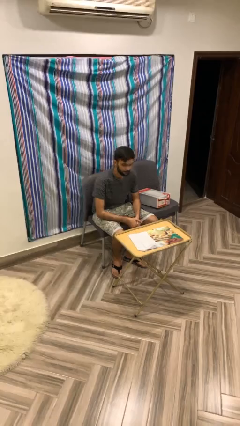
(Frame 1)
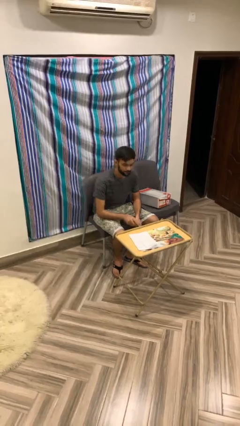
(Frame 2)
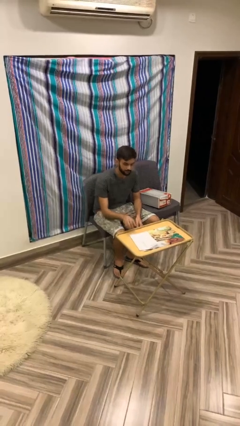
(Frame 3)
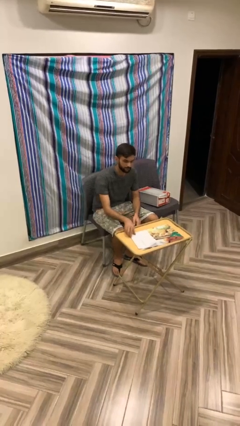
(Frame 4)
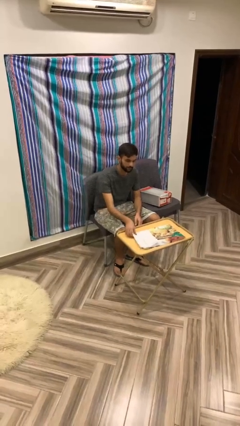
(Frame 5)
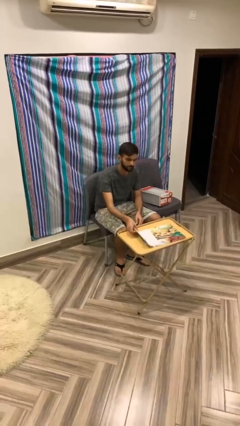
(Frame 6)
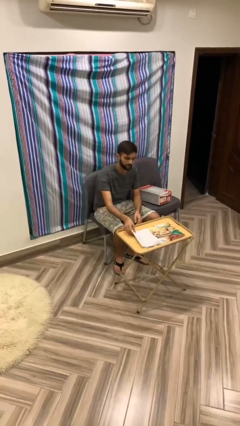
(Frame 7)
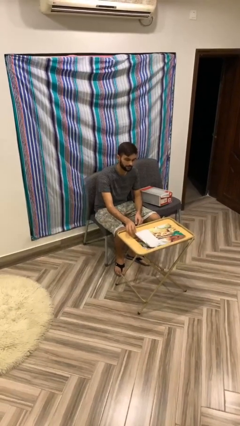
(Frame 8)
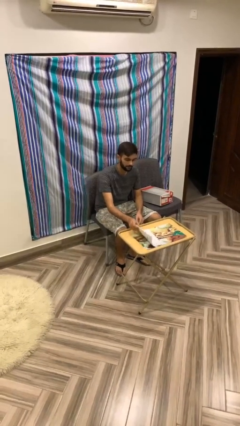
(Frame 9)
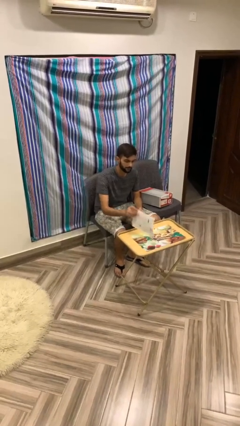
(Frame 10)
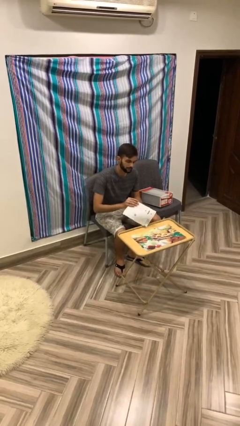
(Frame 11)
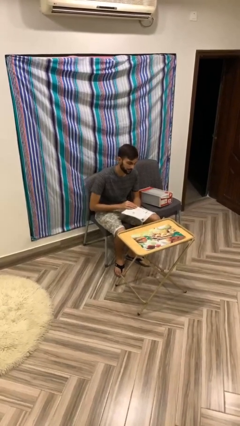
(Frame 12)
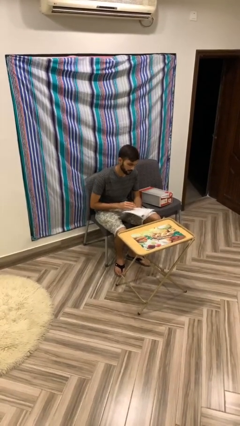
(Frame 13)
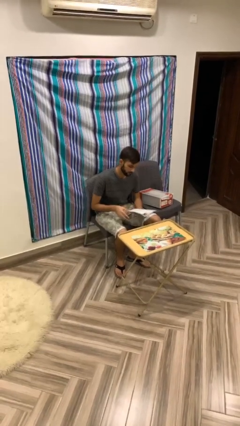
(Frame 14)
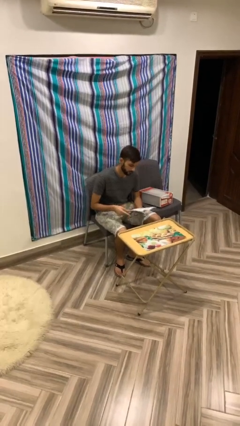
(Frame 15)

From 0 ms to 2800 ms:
person picks up object from table

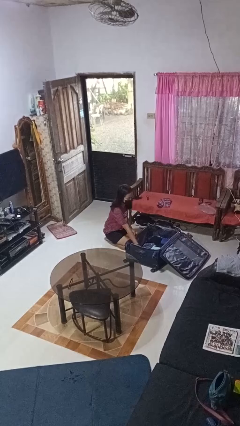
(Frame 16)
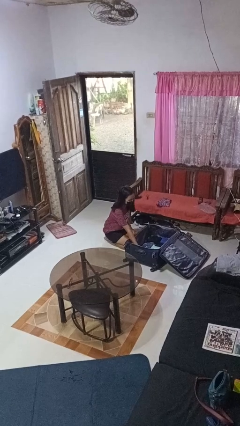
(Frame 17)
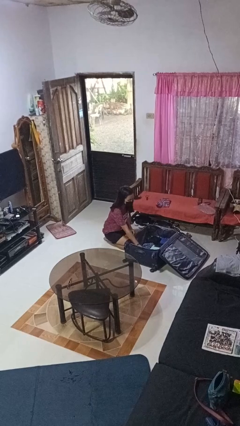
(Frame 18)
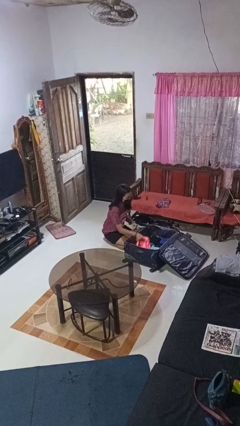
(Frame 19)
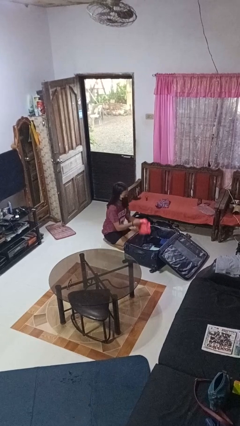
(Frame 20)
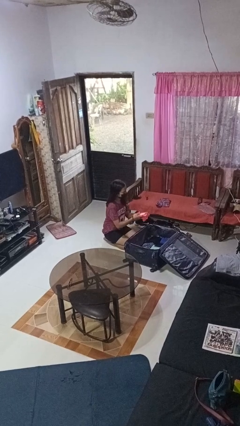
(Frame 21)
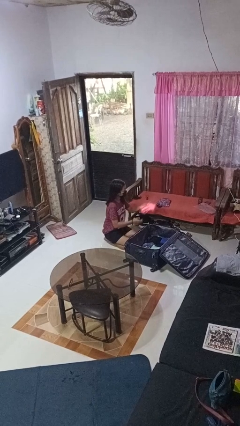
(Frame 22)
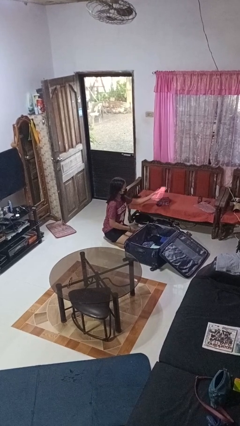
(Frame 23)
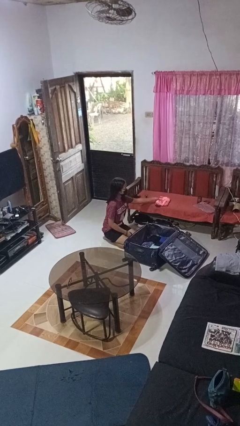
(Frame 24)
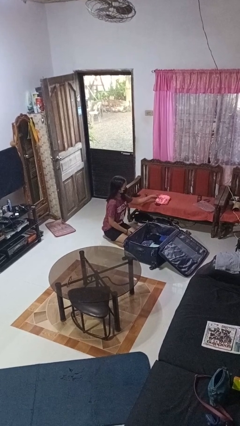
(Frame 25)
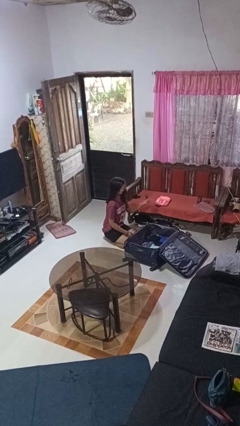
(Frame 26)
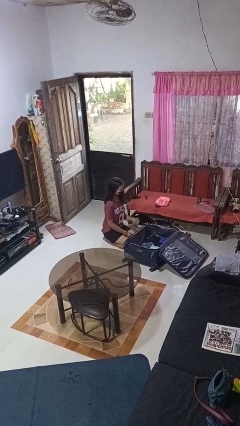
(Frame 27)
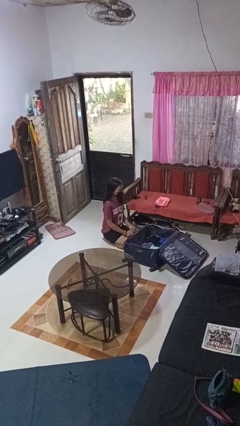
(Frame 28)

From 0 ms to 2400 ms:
person unloads clothes from suitcase

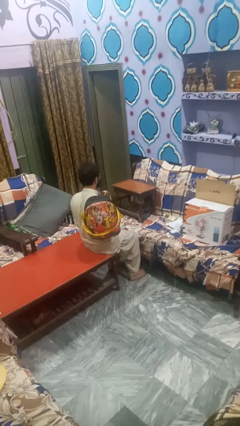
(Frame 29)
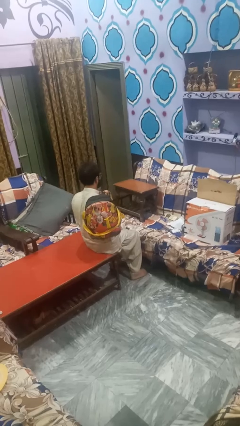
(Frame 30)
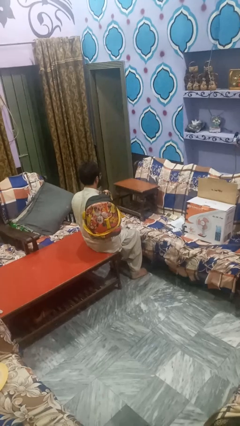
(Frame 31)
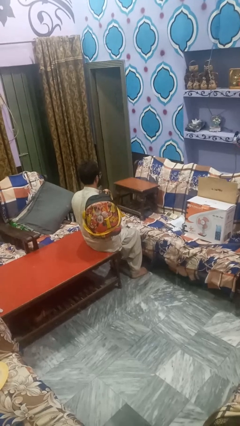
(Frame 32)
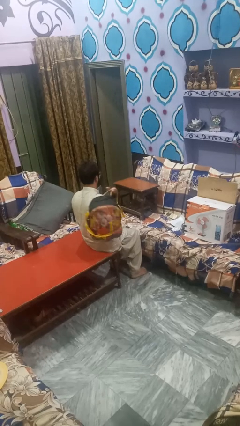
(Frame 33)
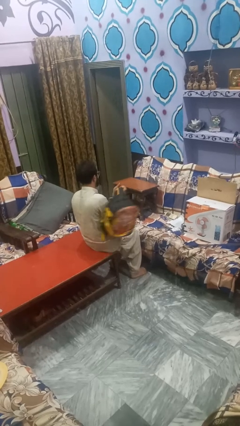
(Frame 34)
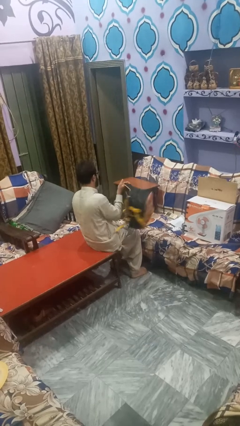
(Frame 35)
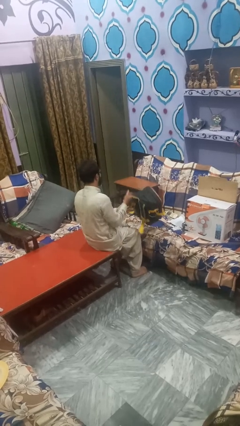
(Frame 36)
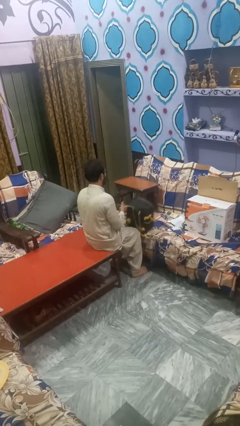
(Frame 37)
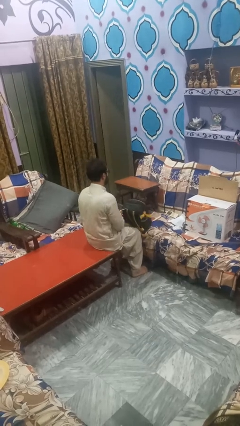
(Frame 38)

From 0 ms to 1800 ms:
person takes off backpack

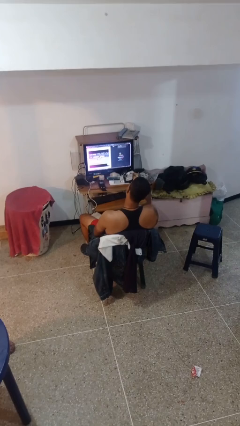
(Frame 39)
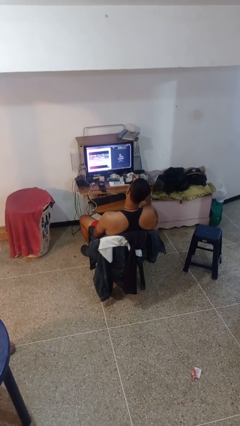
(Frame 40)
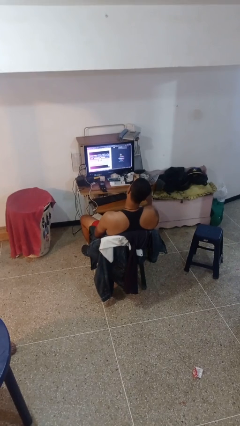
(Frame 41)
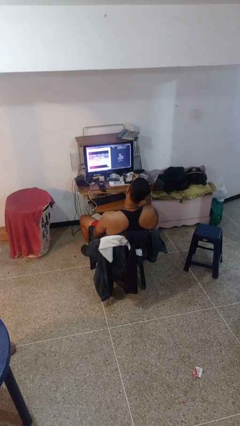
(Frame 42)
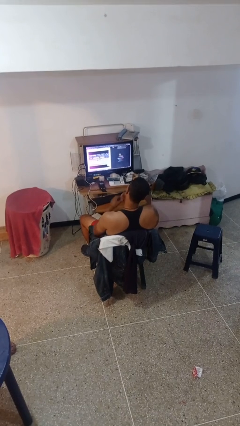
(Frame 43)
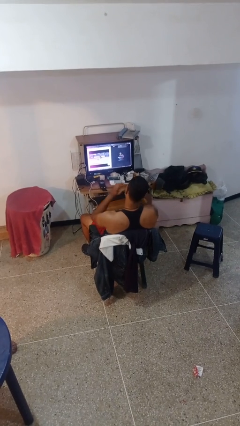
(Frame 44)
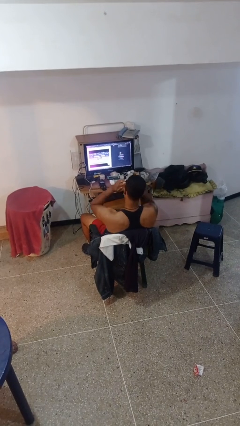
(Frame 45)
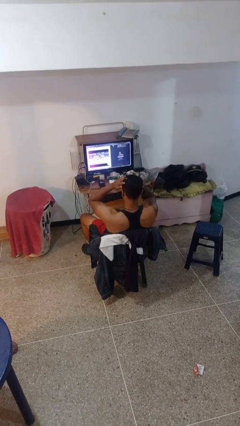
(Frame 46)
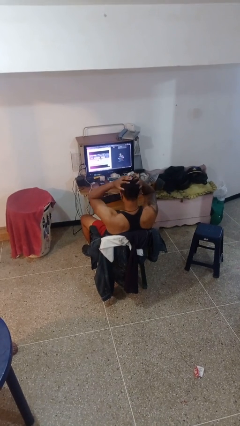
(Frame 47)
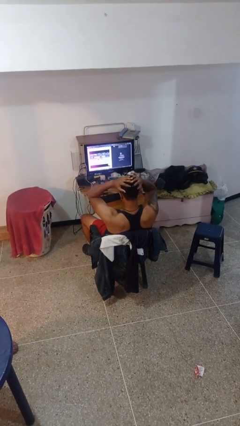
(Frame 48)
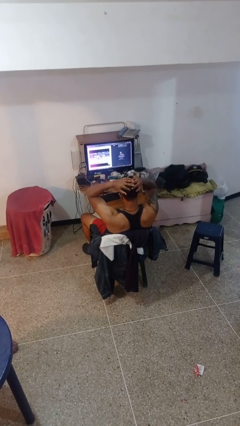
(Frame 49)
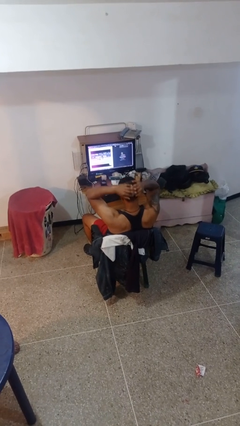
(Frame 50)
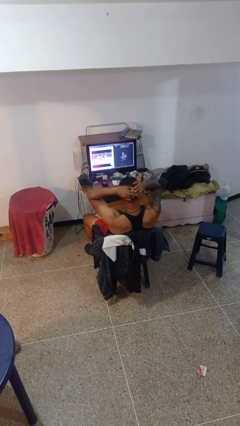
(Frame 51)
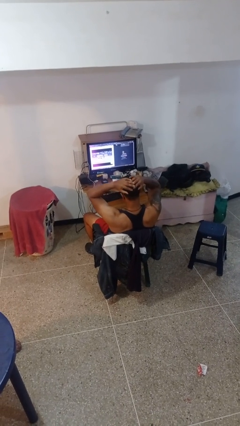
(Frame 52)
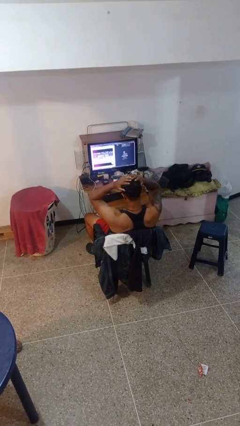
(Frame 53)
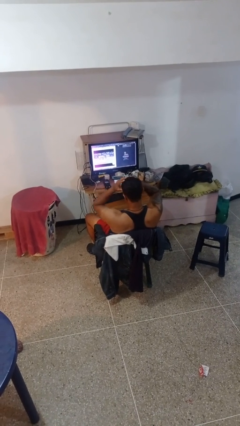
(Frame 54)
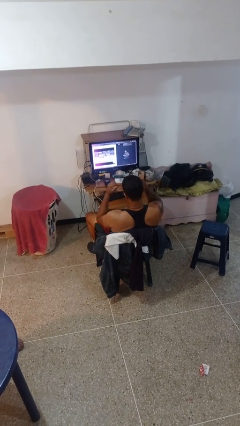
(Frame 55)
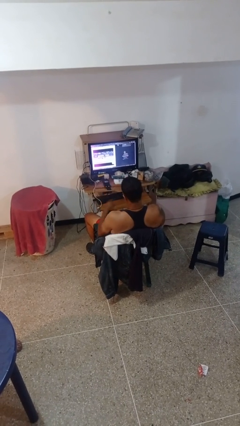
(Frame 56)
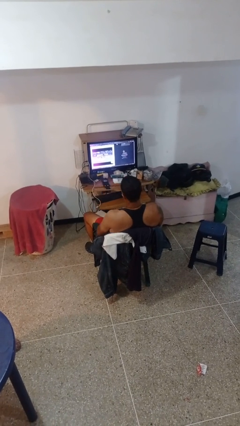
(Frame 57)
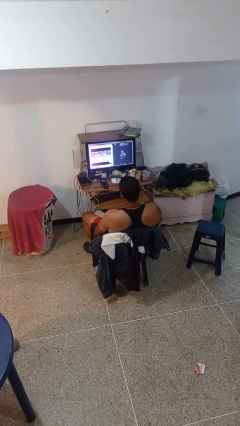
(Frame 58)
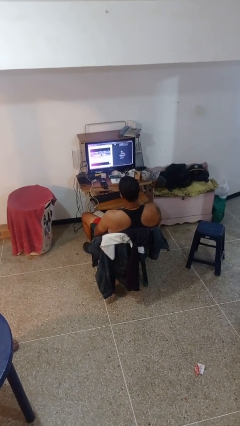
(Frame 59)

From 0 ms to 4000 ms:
person pats head

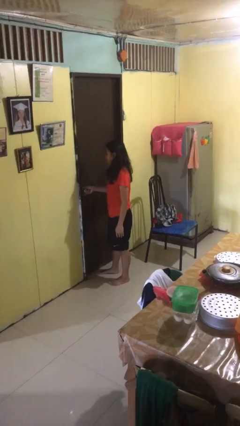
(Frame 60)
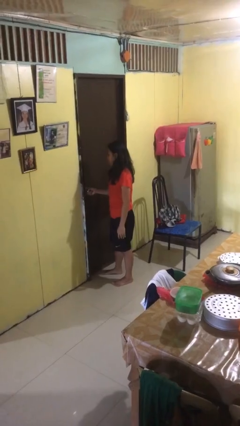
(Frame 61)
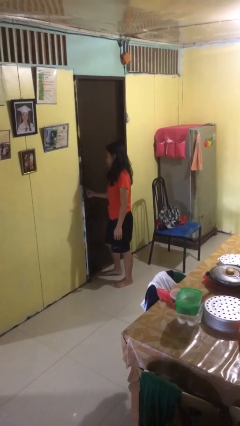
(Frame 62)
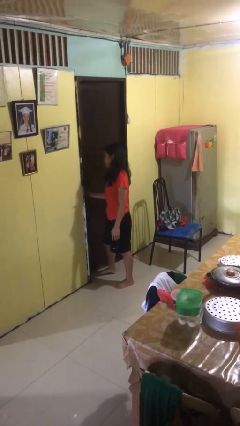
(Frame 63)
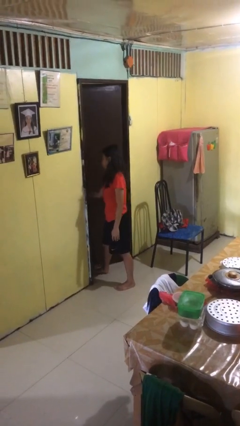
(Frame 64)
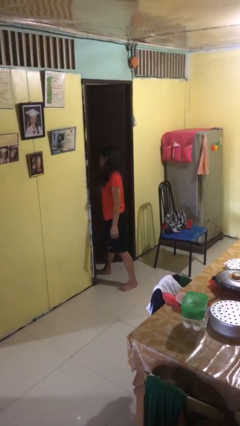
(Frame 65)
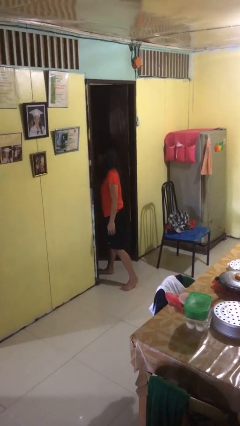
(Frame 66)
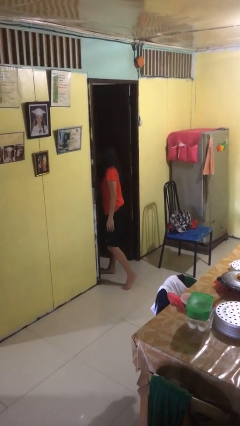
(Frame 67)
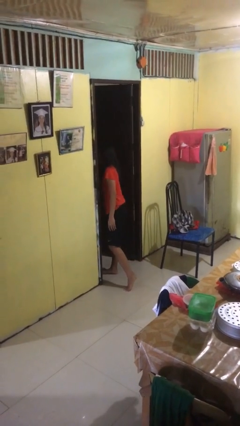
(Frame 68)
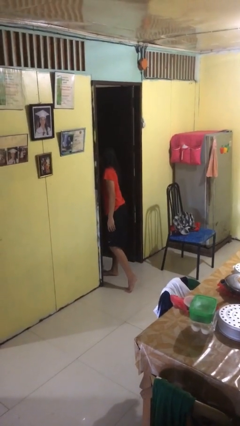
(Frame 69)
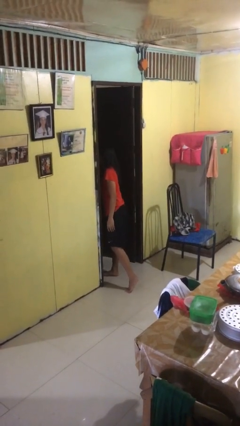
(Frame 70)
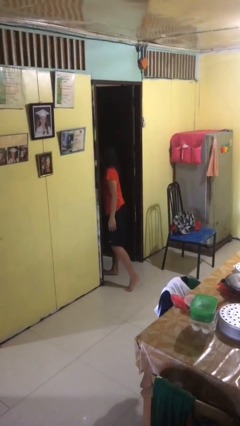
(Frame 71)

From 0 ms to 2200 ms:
person opens facility door

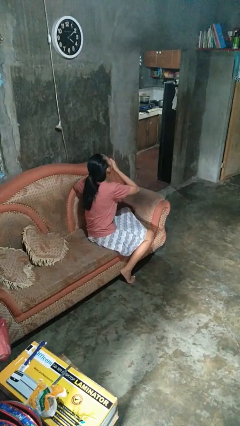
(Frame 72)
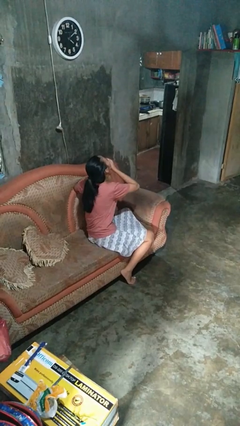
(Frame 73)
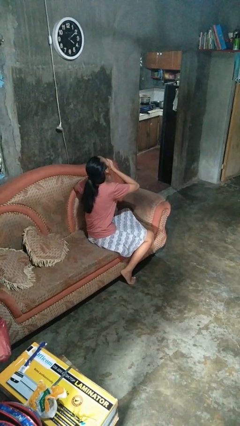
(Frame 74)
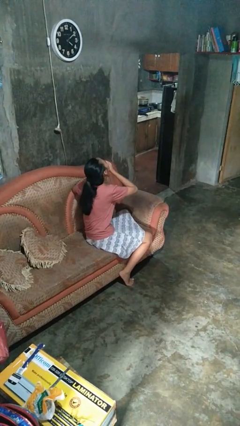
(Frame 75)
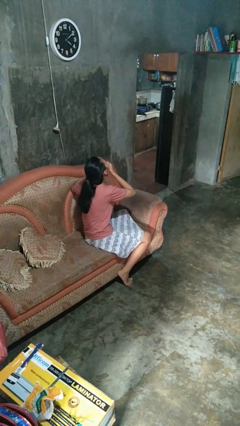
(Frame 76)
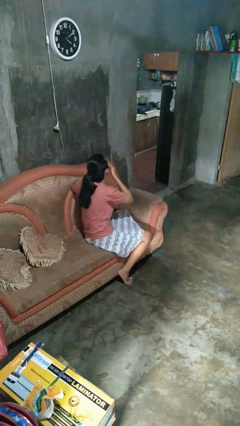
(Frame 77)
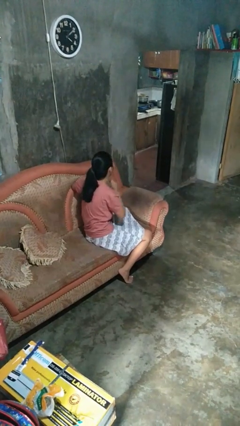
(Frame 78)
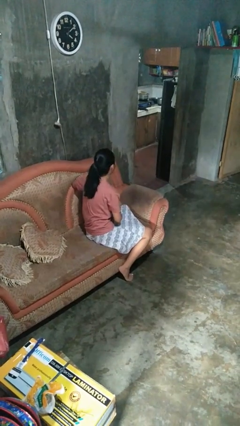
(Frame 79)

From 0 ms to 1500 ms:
person yawns

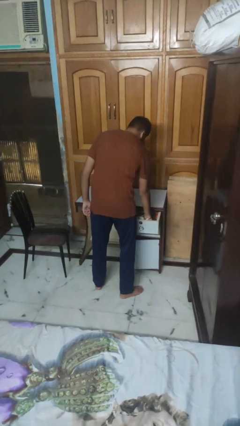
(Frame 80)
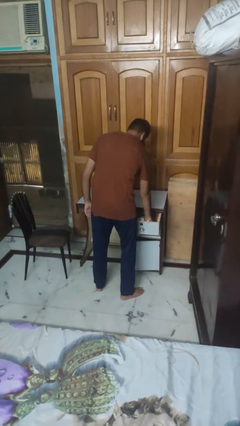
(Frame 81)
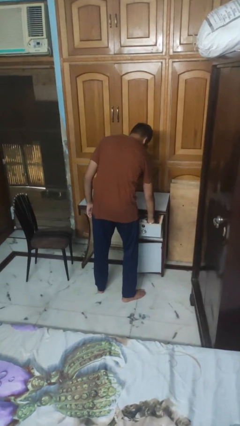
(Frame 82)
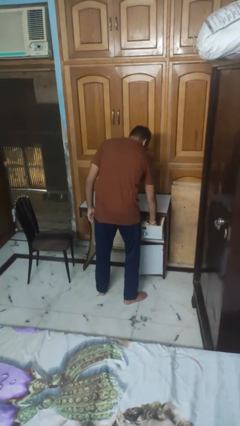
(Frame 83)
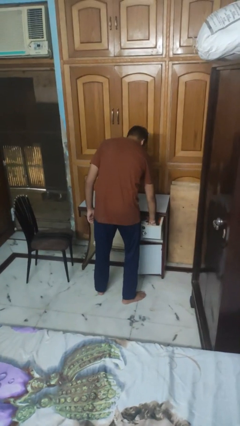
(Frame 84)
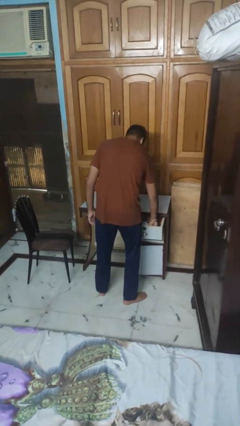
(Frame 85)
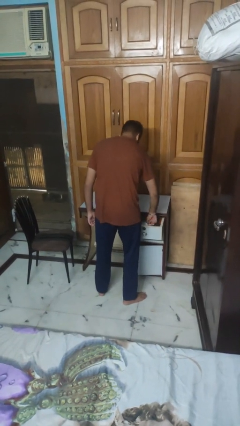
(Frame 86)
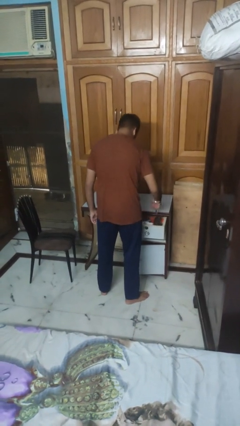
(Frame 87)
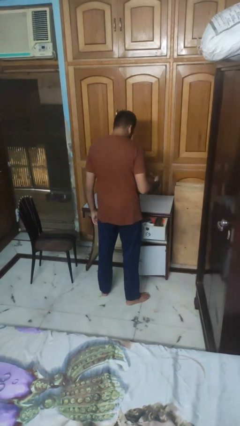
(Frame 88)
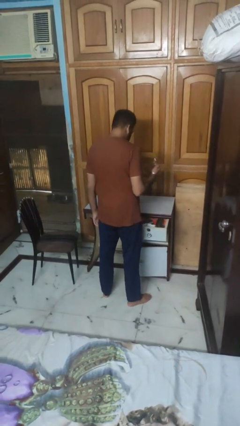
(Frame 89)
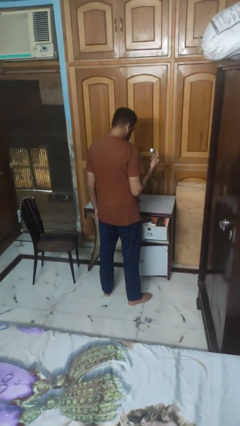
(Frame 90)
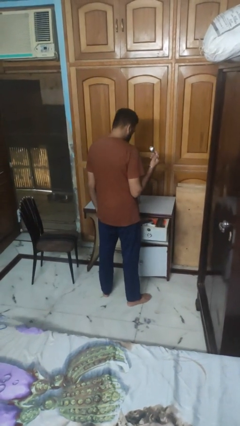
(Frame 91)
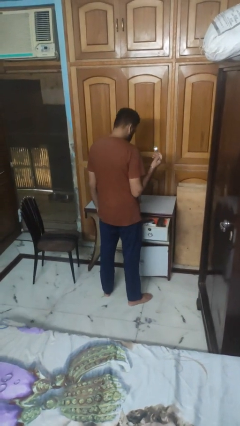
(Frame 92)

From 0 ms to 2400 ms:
person takes object from kitchen drawer
